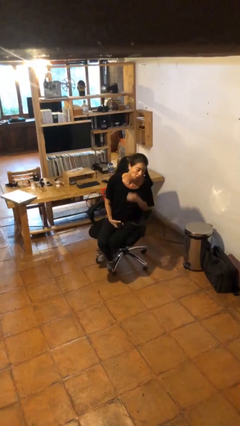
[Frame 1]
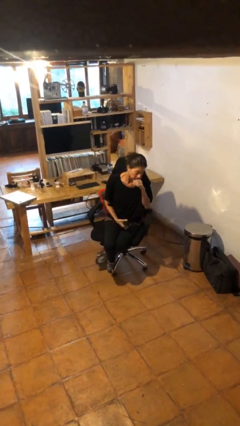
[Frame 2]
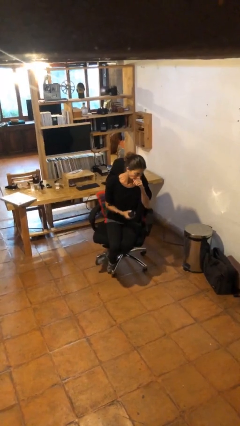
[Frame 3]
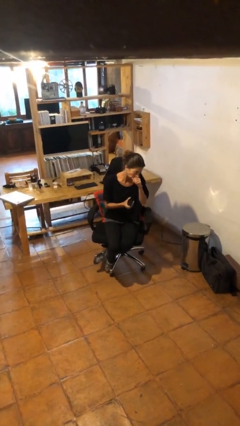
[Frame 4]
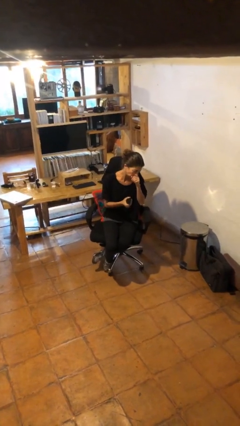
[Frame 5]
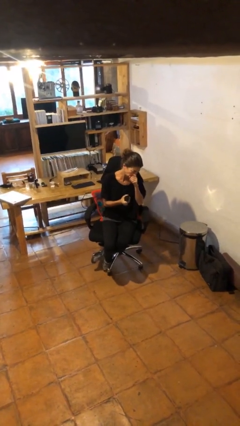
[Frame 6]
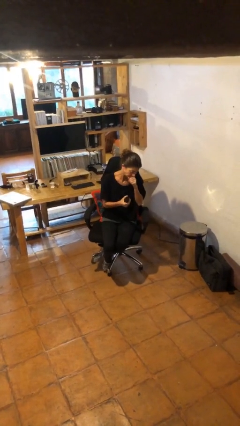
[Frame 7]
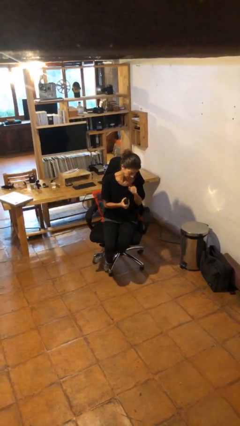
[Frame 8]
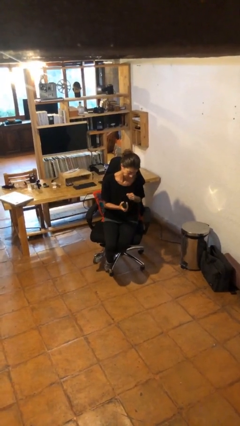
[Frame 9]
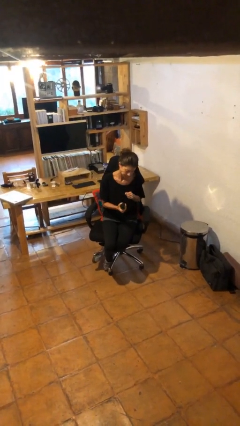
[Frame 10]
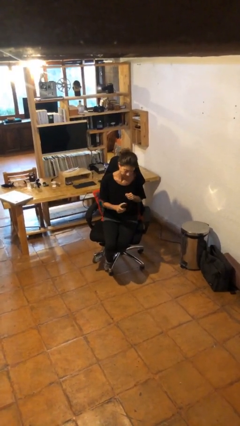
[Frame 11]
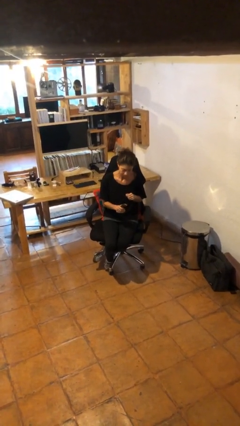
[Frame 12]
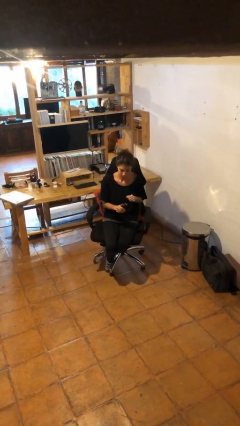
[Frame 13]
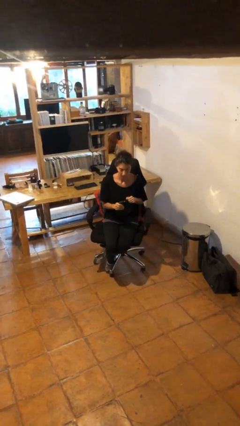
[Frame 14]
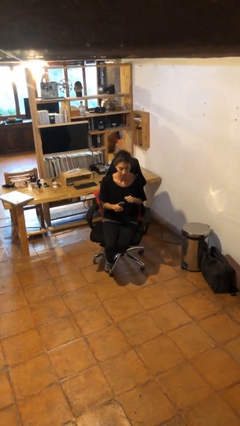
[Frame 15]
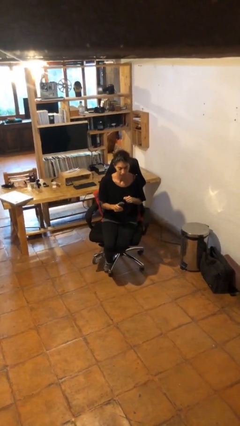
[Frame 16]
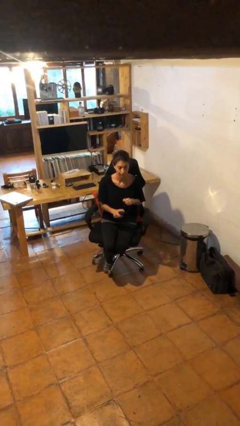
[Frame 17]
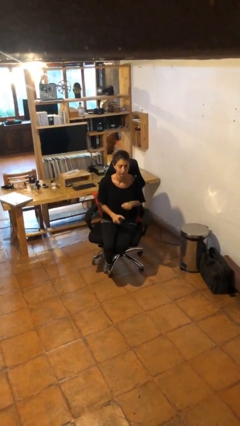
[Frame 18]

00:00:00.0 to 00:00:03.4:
person squeezes object

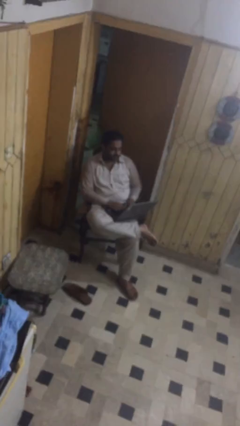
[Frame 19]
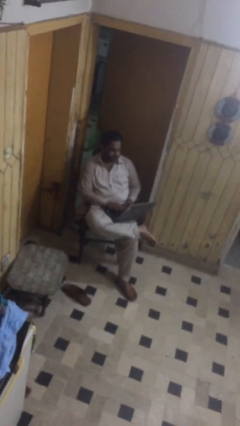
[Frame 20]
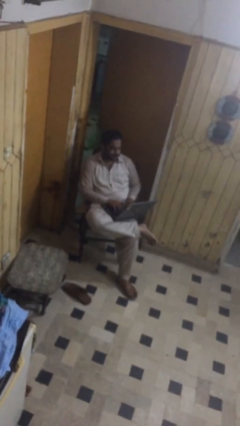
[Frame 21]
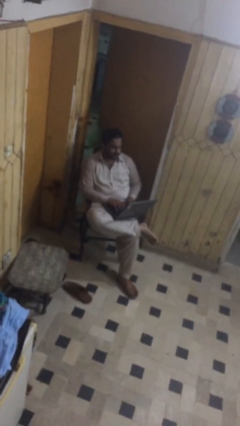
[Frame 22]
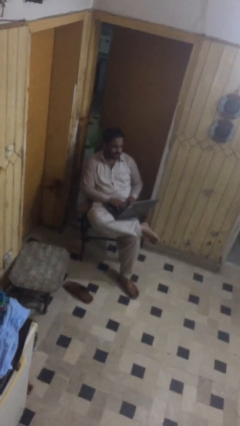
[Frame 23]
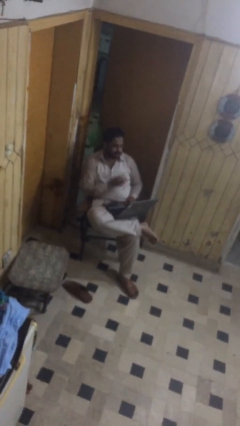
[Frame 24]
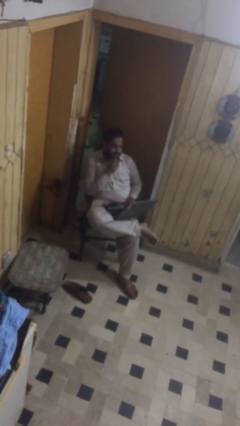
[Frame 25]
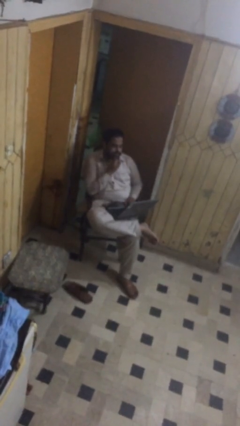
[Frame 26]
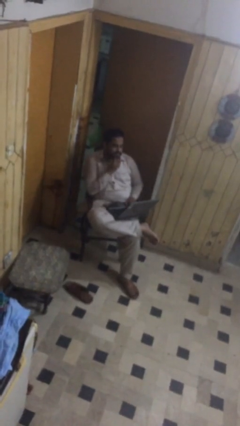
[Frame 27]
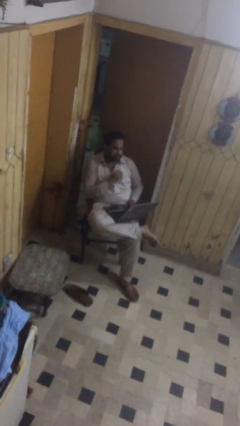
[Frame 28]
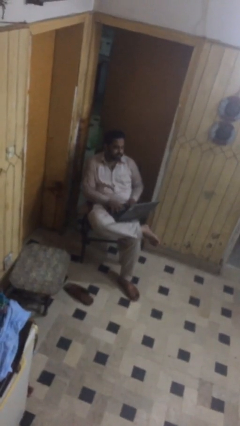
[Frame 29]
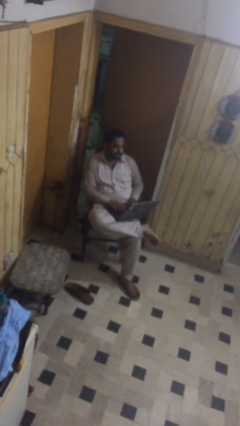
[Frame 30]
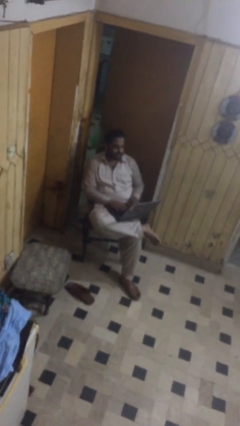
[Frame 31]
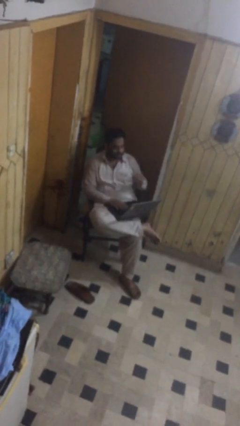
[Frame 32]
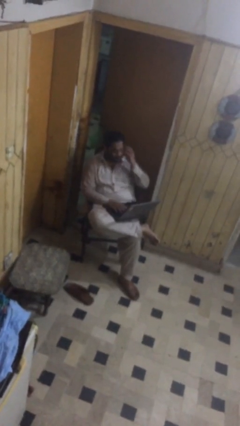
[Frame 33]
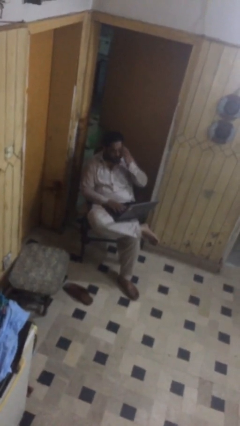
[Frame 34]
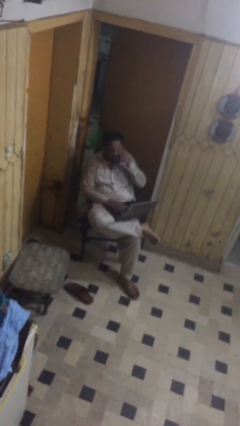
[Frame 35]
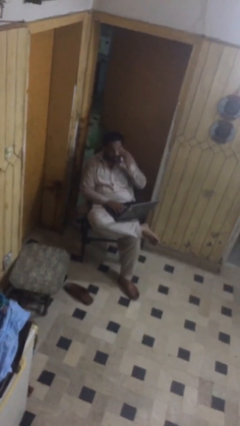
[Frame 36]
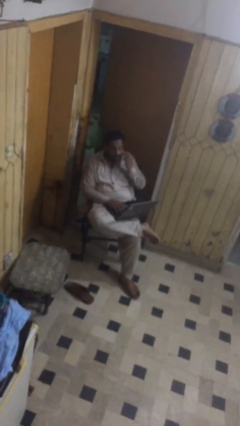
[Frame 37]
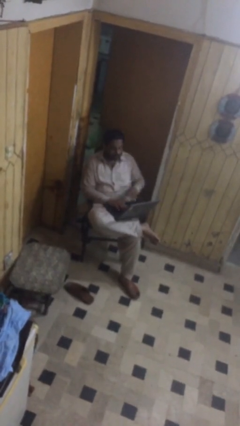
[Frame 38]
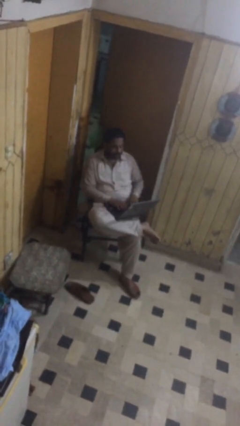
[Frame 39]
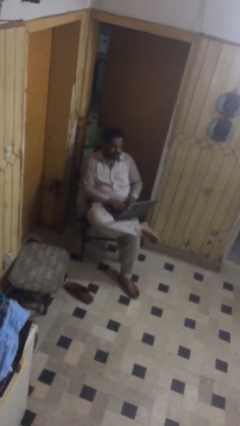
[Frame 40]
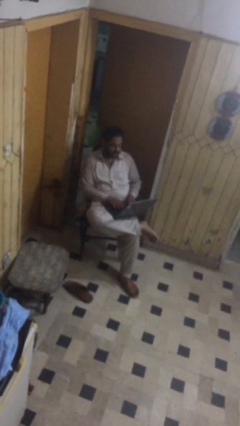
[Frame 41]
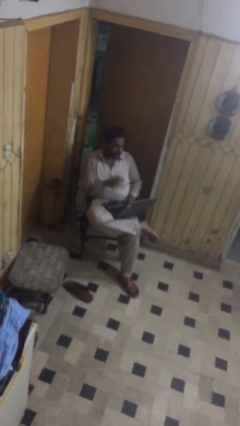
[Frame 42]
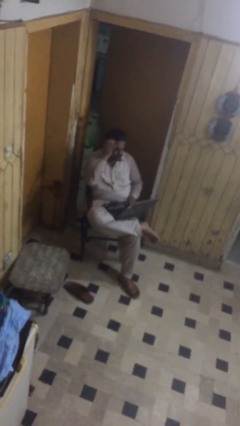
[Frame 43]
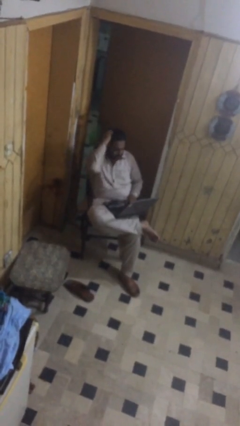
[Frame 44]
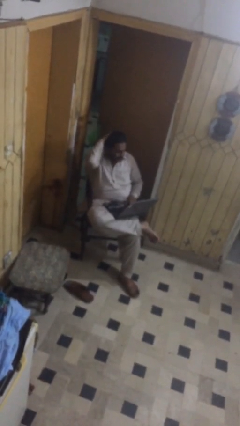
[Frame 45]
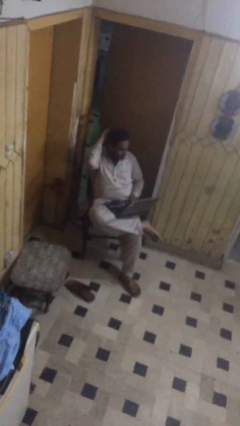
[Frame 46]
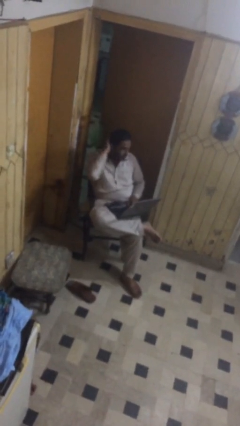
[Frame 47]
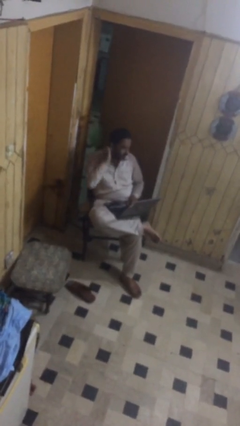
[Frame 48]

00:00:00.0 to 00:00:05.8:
person interacts with laptop

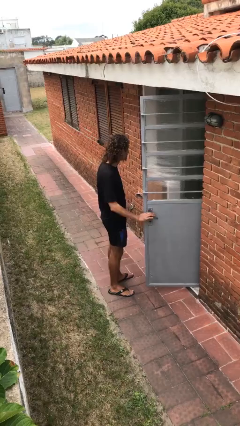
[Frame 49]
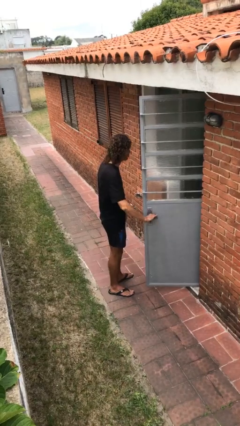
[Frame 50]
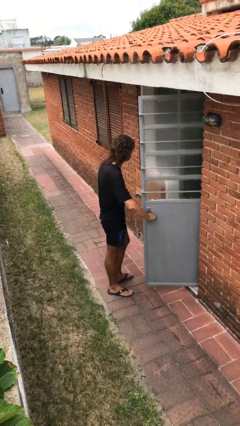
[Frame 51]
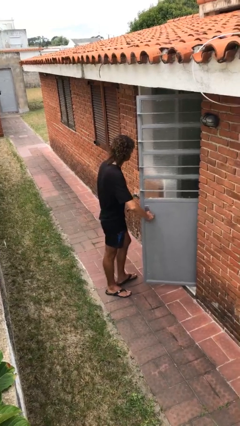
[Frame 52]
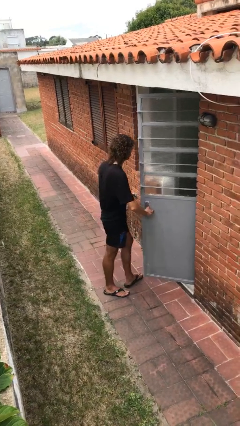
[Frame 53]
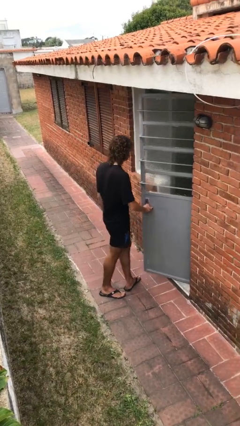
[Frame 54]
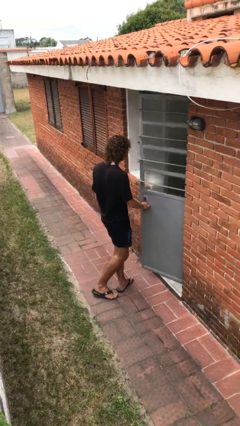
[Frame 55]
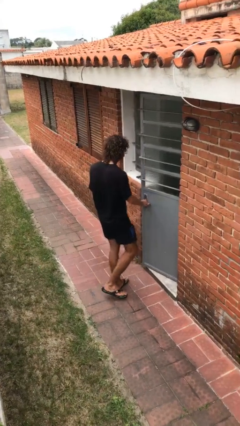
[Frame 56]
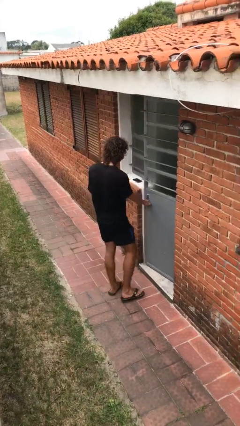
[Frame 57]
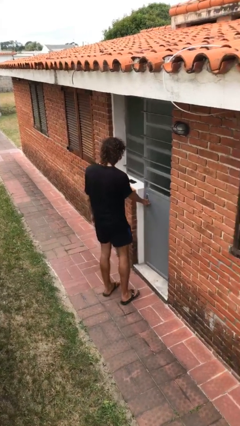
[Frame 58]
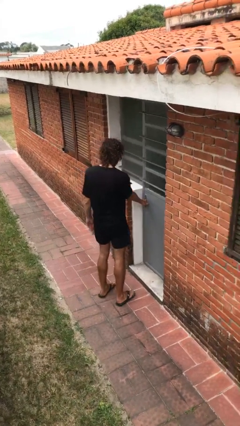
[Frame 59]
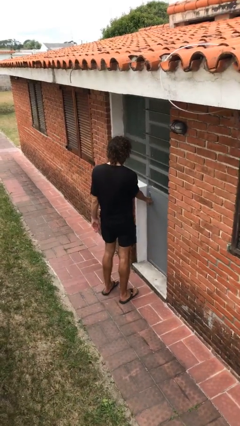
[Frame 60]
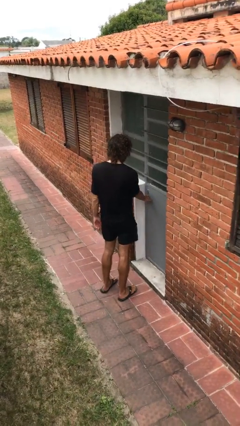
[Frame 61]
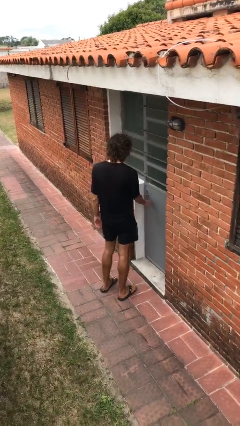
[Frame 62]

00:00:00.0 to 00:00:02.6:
person closes facility door

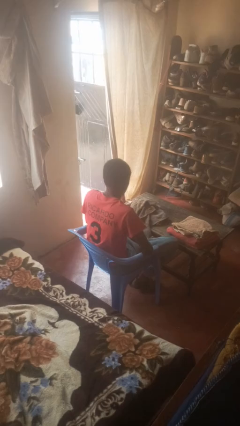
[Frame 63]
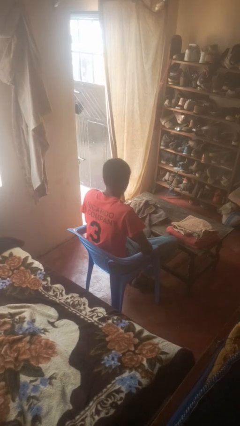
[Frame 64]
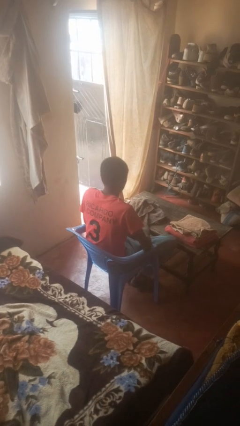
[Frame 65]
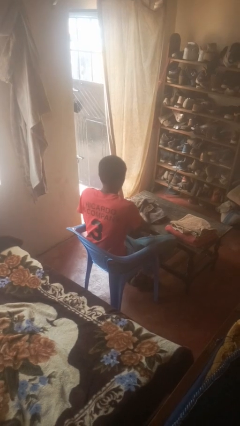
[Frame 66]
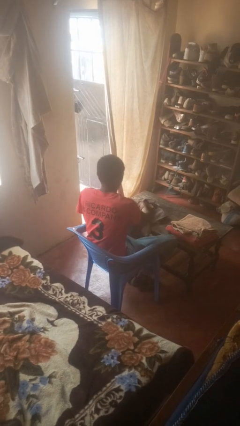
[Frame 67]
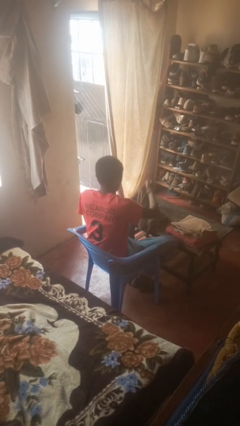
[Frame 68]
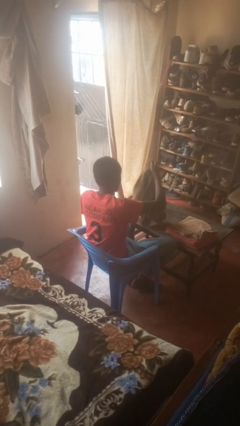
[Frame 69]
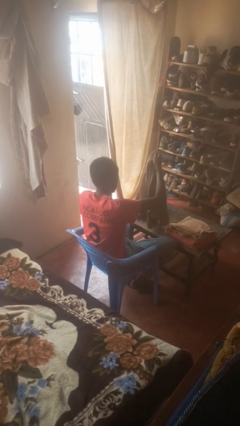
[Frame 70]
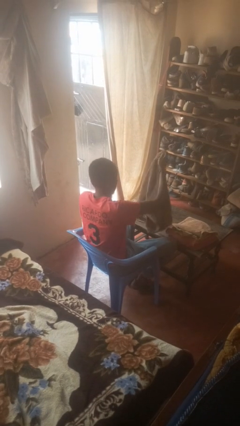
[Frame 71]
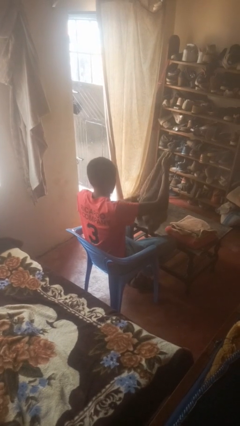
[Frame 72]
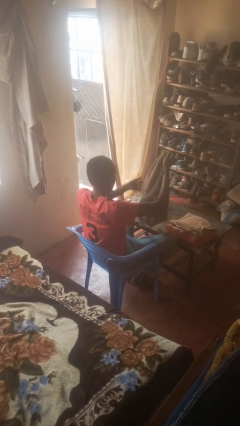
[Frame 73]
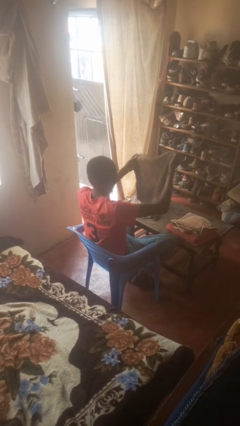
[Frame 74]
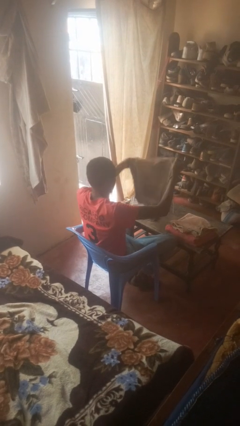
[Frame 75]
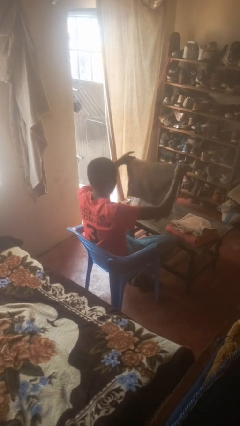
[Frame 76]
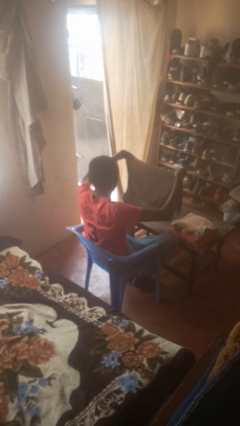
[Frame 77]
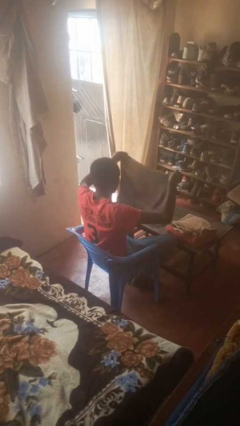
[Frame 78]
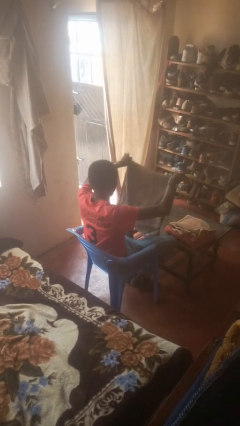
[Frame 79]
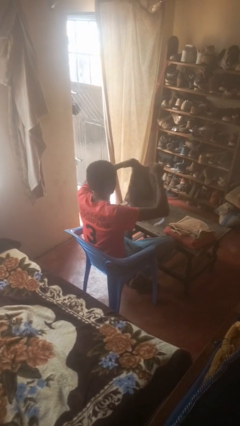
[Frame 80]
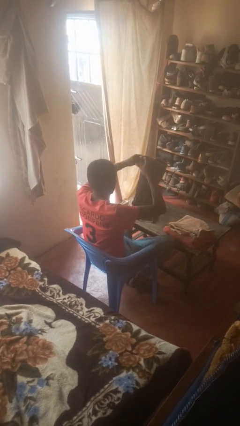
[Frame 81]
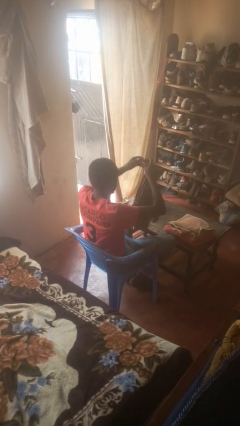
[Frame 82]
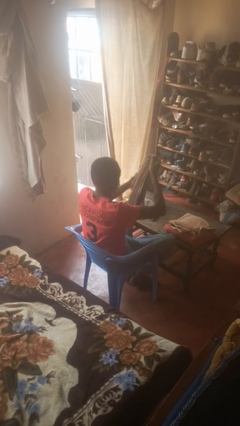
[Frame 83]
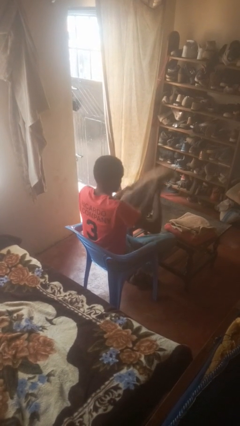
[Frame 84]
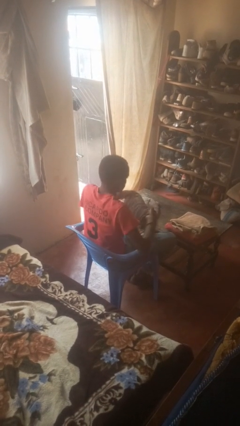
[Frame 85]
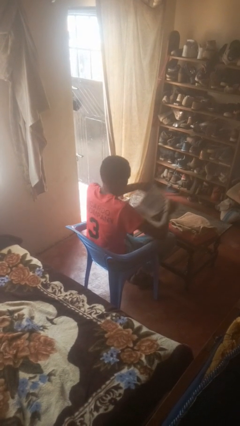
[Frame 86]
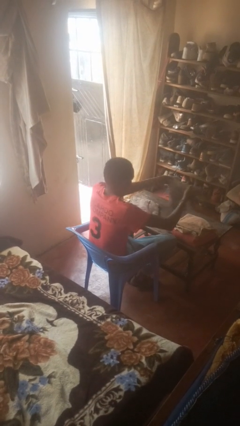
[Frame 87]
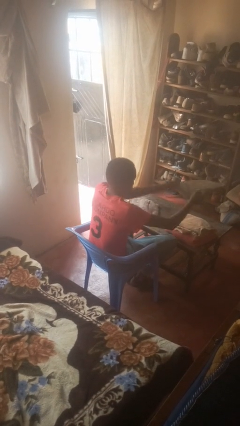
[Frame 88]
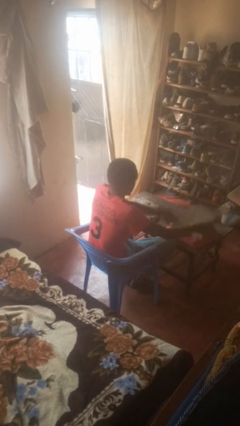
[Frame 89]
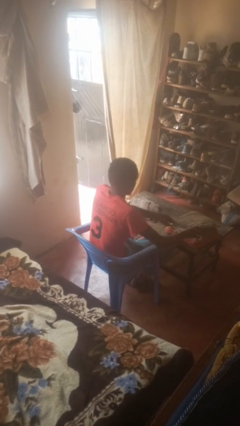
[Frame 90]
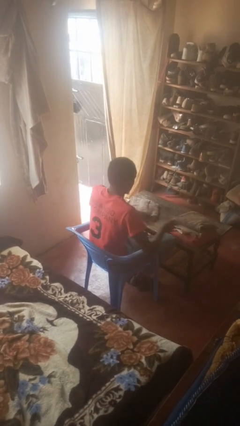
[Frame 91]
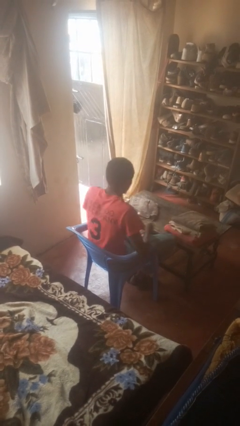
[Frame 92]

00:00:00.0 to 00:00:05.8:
person folds towel
